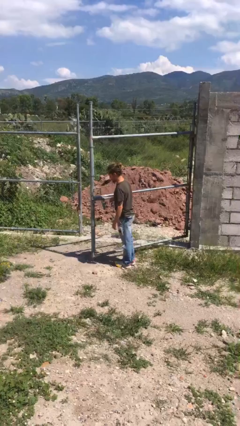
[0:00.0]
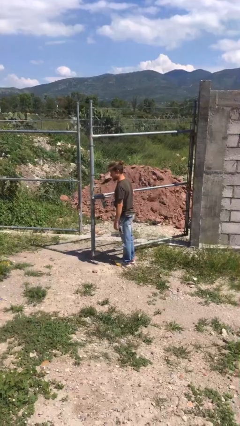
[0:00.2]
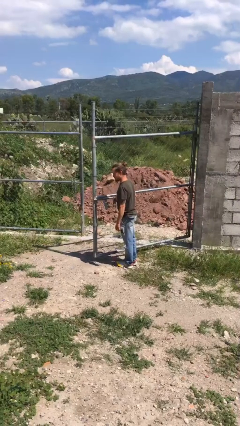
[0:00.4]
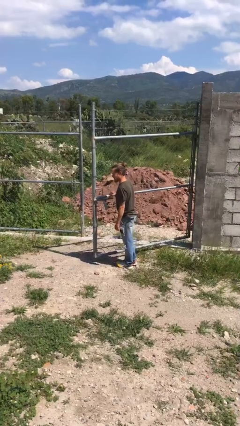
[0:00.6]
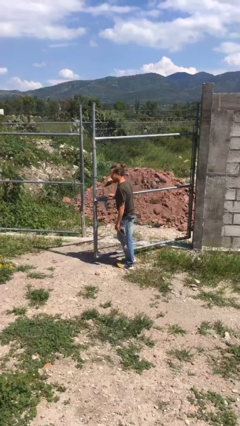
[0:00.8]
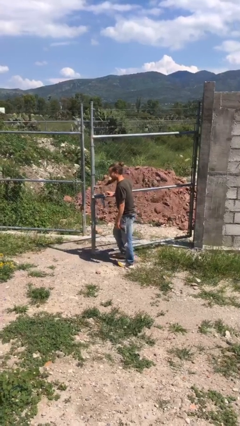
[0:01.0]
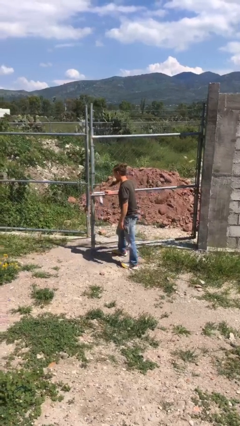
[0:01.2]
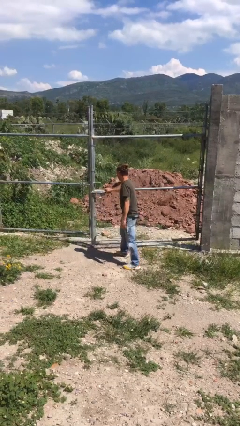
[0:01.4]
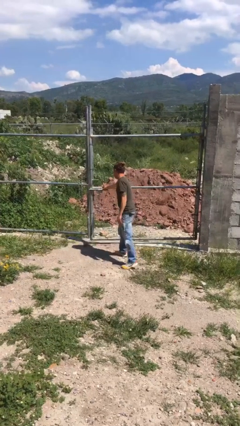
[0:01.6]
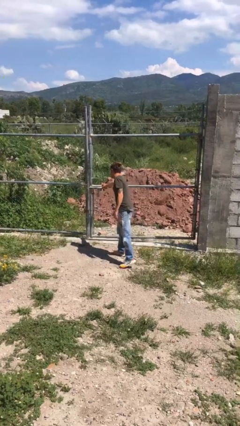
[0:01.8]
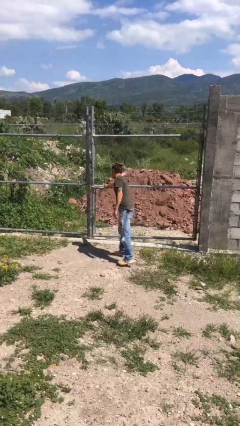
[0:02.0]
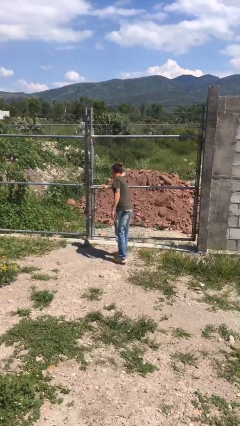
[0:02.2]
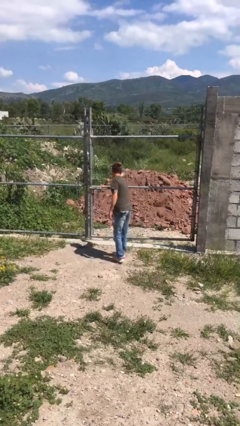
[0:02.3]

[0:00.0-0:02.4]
person closes gate

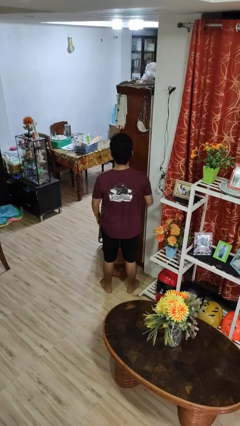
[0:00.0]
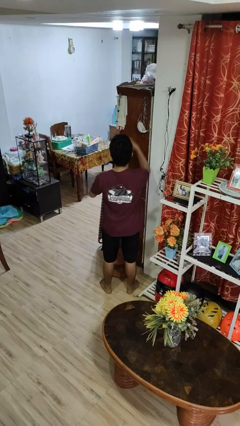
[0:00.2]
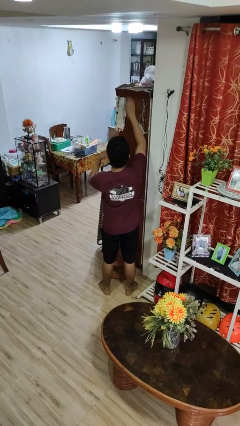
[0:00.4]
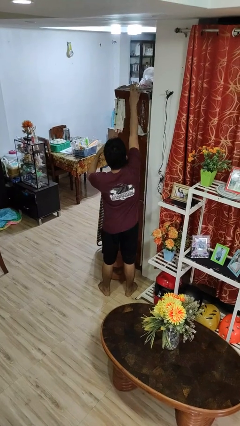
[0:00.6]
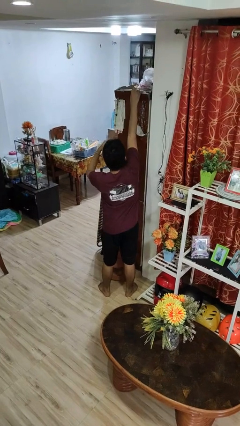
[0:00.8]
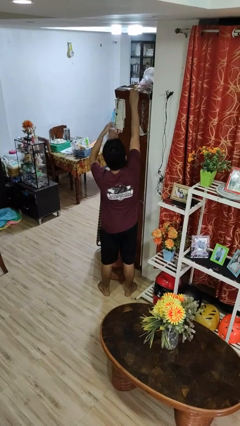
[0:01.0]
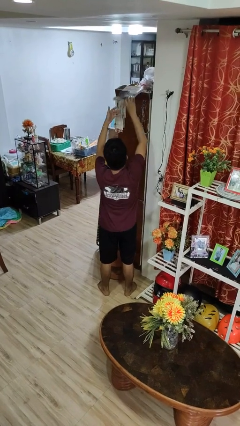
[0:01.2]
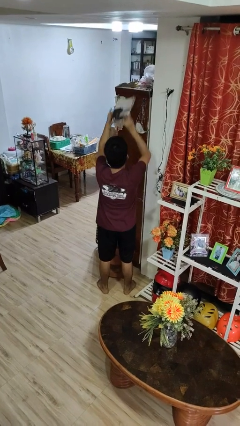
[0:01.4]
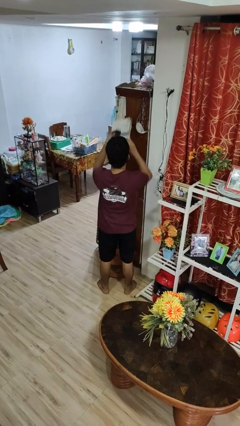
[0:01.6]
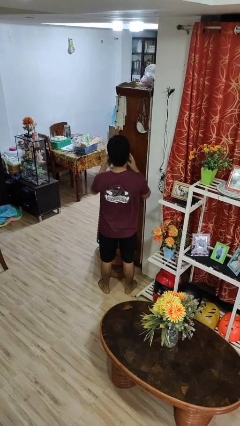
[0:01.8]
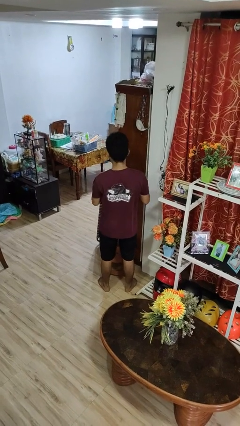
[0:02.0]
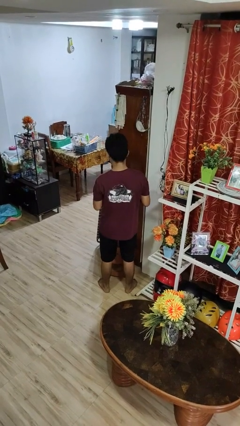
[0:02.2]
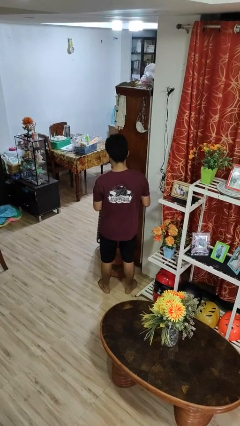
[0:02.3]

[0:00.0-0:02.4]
person picks up object from shelf

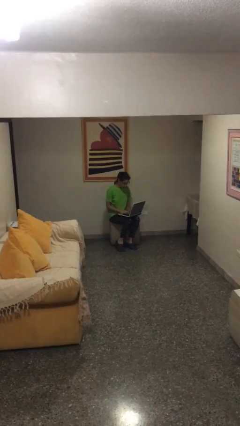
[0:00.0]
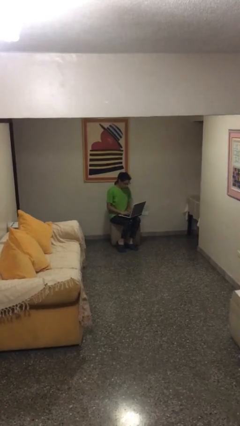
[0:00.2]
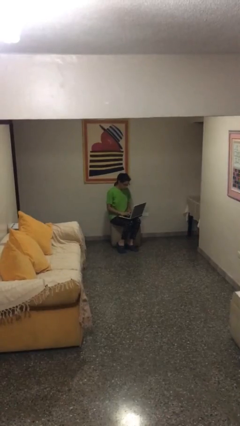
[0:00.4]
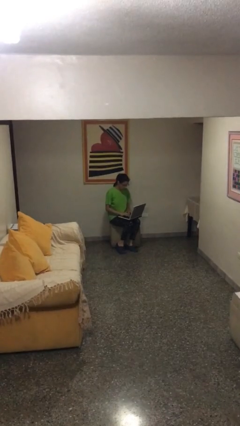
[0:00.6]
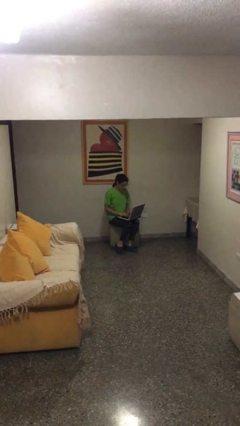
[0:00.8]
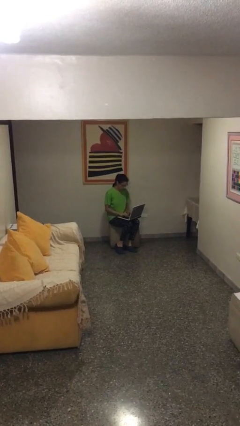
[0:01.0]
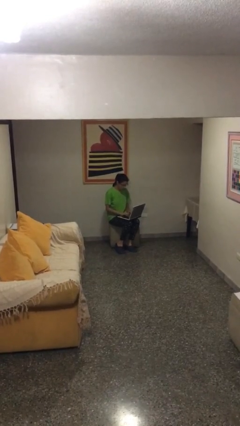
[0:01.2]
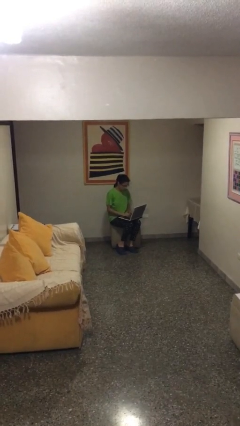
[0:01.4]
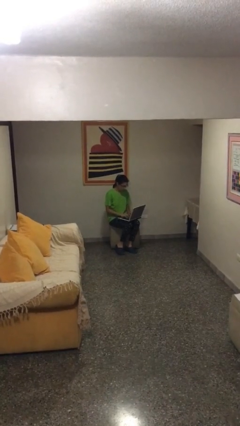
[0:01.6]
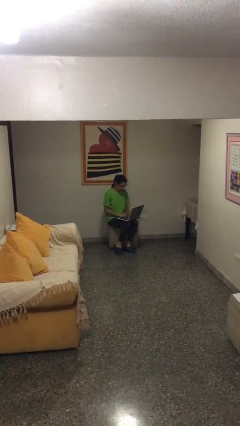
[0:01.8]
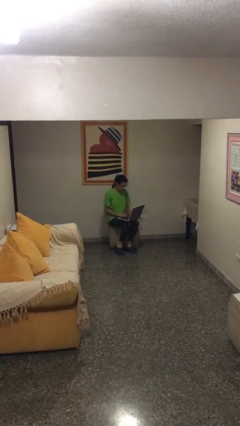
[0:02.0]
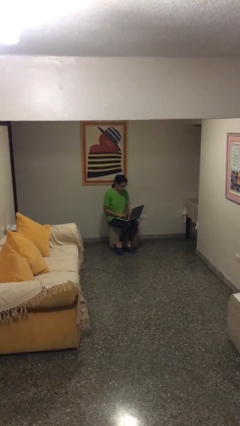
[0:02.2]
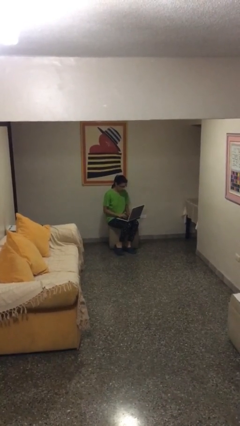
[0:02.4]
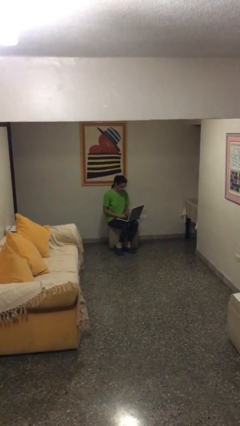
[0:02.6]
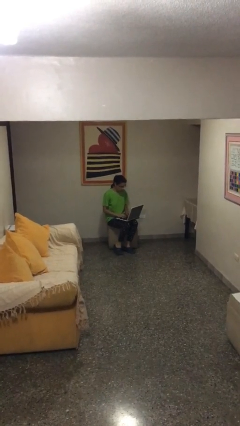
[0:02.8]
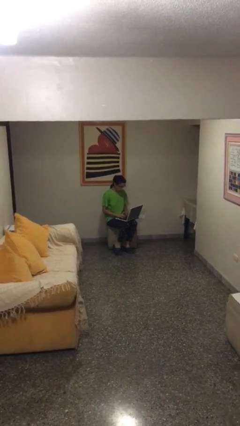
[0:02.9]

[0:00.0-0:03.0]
person interacts with laptop

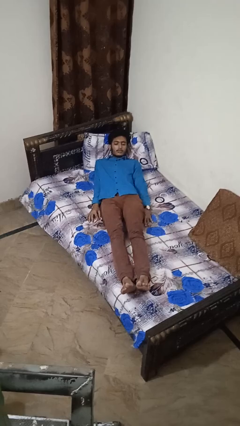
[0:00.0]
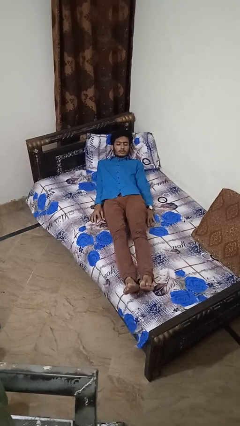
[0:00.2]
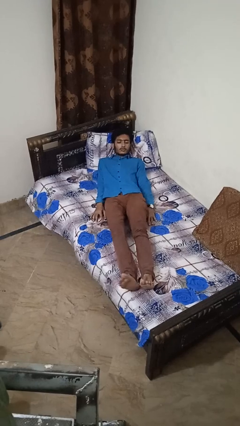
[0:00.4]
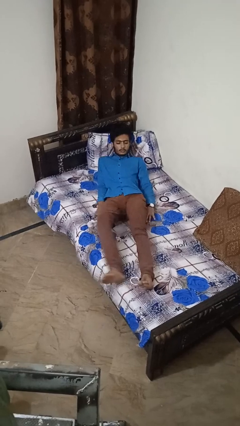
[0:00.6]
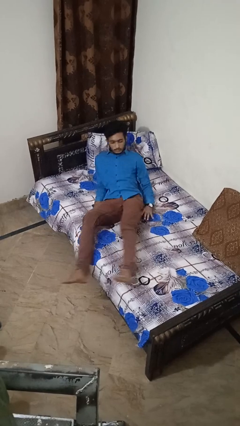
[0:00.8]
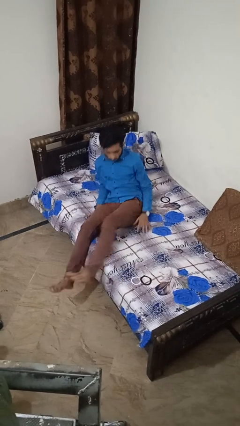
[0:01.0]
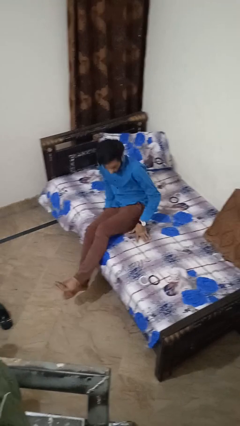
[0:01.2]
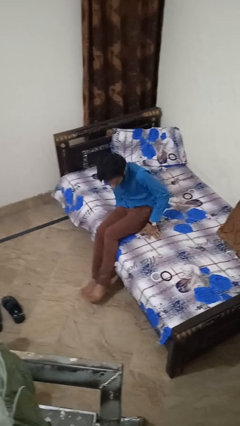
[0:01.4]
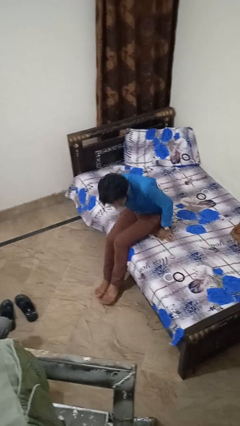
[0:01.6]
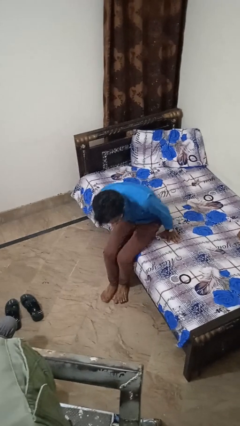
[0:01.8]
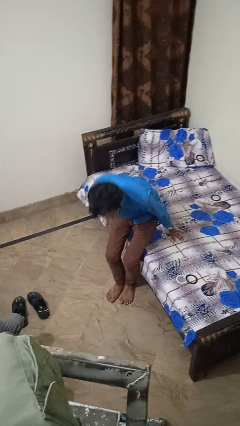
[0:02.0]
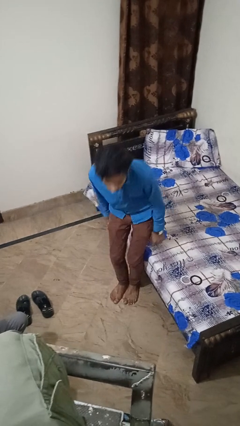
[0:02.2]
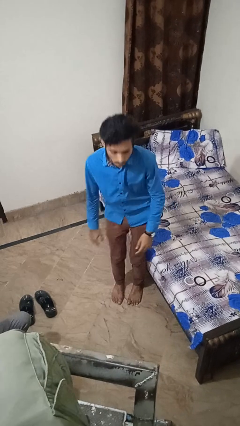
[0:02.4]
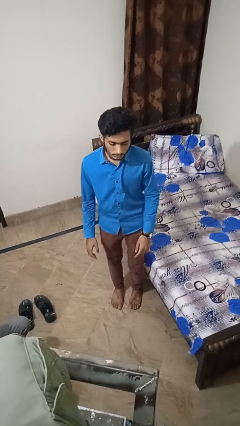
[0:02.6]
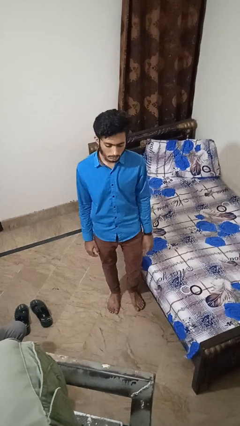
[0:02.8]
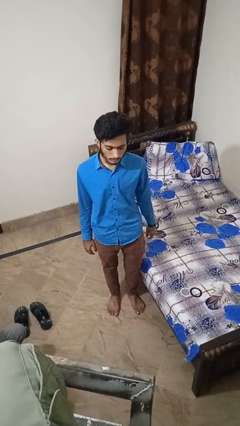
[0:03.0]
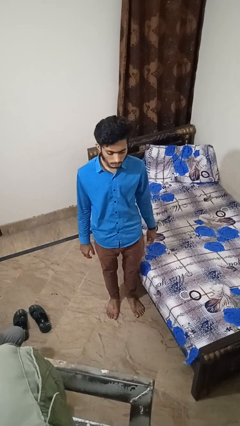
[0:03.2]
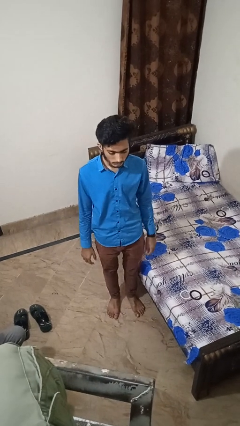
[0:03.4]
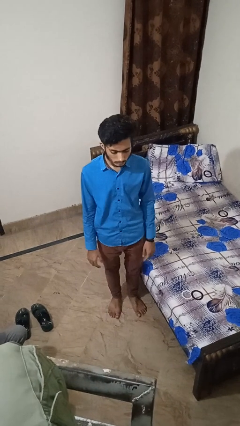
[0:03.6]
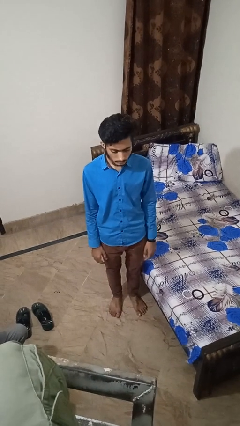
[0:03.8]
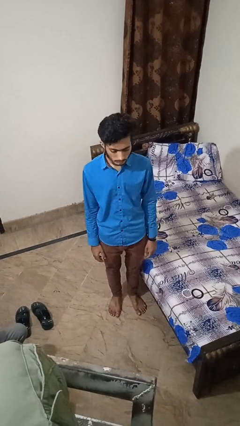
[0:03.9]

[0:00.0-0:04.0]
person stands up

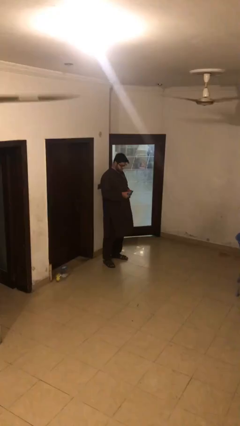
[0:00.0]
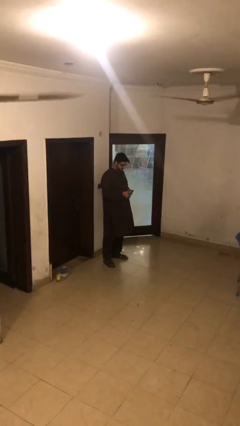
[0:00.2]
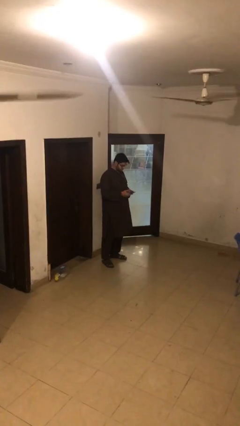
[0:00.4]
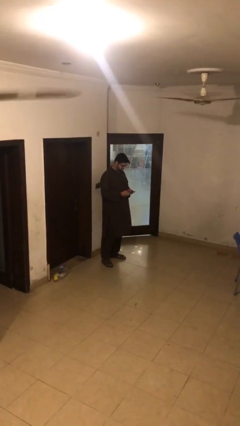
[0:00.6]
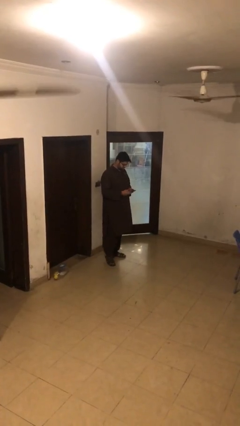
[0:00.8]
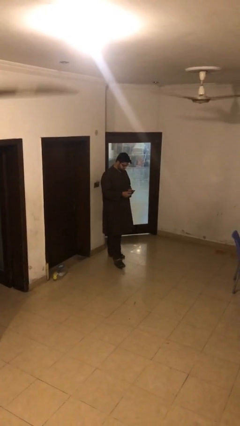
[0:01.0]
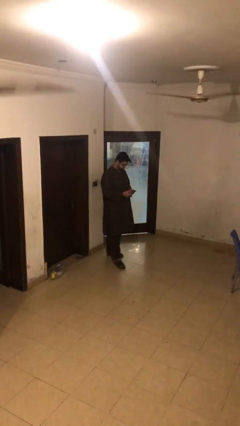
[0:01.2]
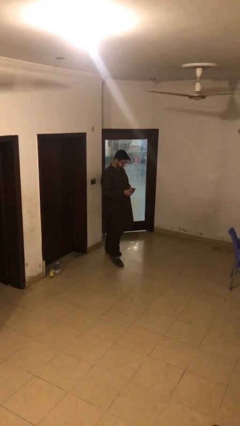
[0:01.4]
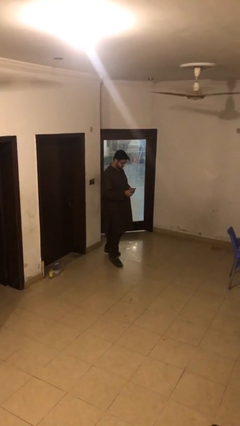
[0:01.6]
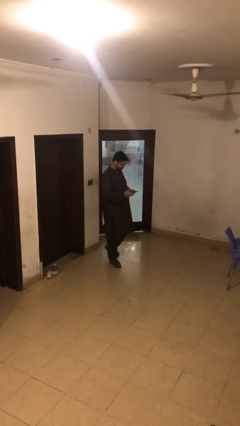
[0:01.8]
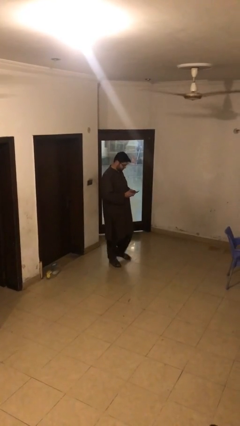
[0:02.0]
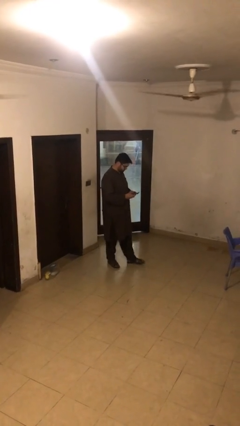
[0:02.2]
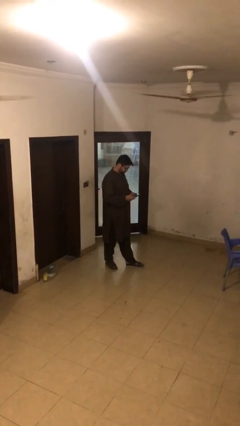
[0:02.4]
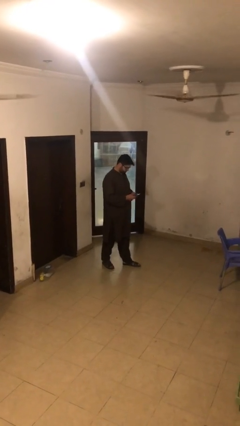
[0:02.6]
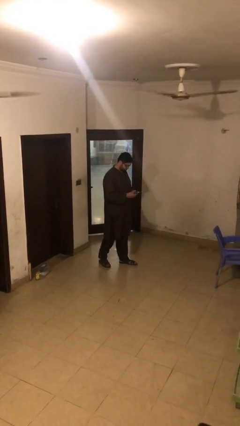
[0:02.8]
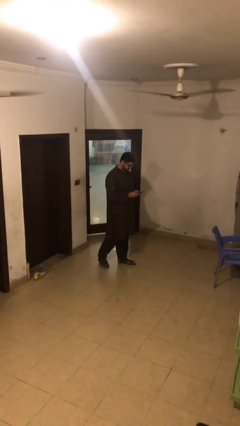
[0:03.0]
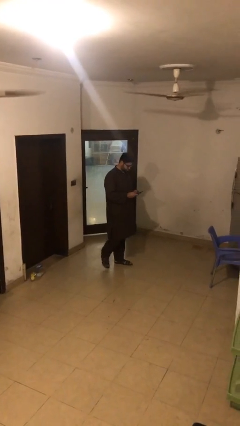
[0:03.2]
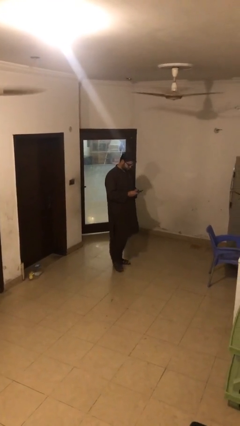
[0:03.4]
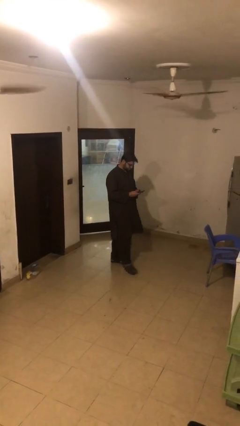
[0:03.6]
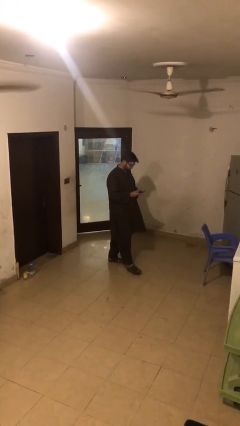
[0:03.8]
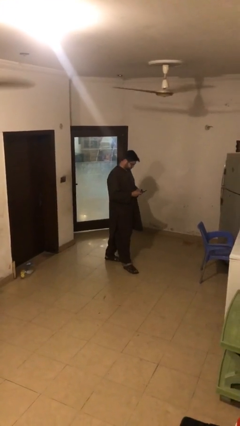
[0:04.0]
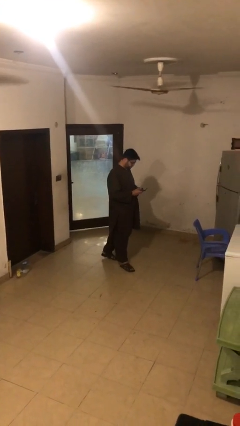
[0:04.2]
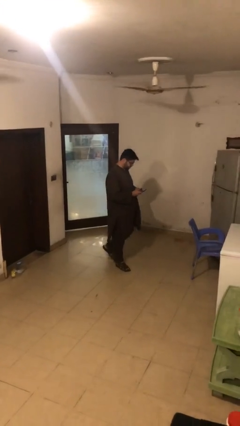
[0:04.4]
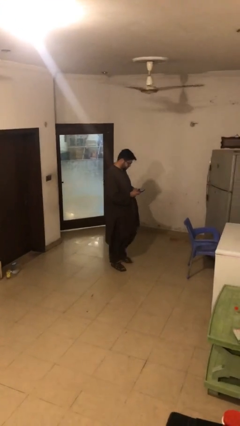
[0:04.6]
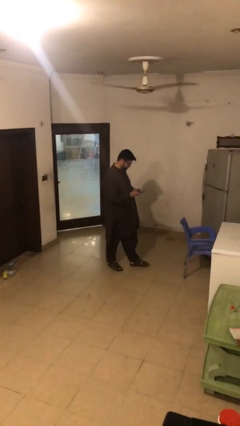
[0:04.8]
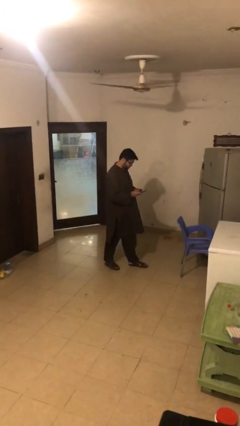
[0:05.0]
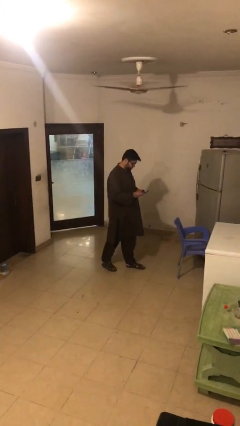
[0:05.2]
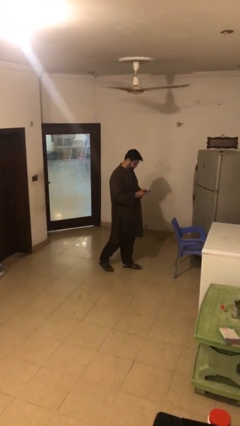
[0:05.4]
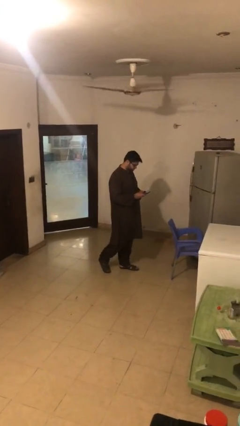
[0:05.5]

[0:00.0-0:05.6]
person texts on phone
